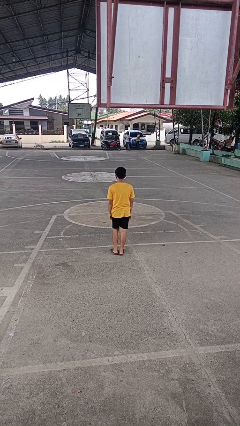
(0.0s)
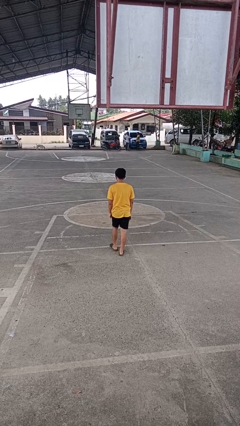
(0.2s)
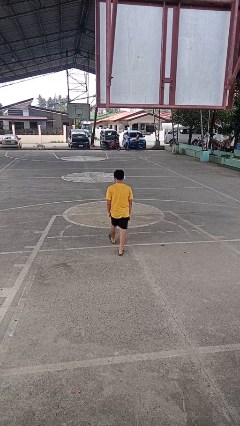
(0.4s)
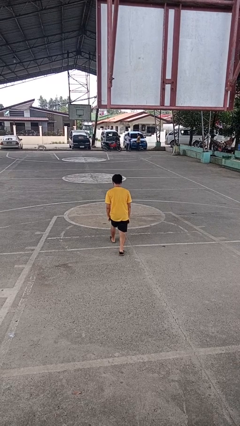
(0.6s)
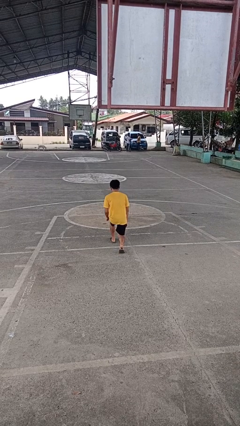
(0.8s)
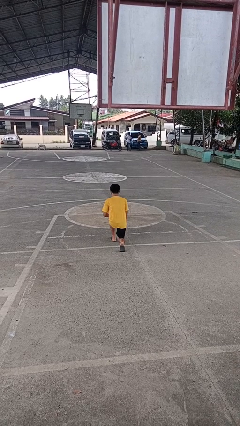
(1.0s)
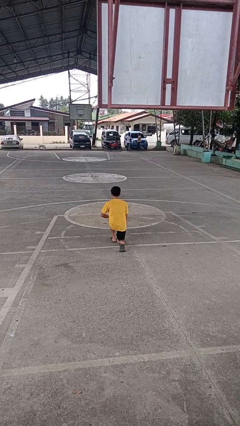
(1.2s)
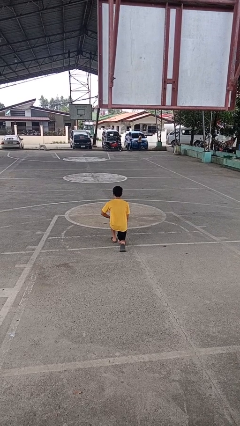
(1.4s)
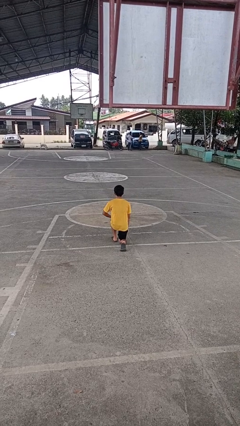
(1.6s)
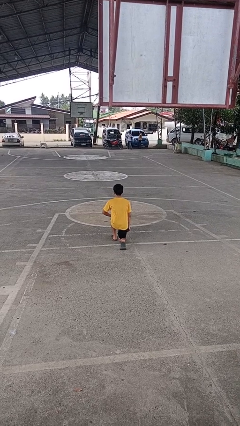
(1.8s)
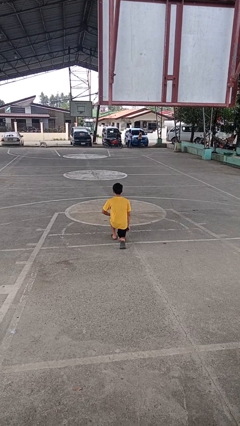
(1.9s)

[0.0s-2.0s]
person kneels

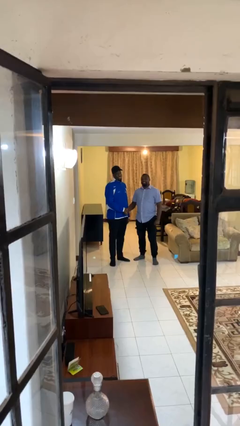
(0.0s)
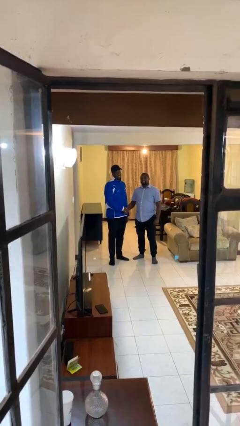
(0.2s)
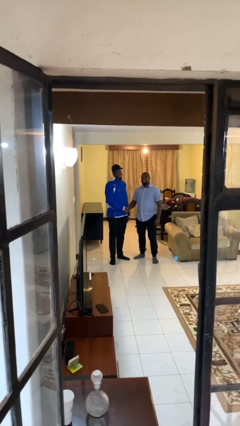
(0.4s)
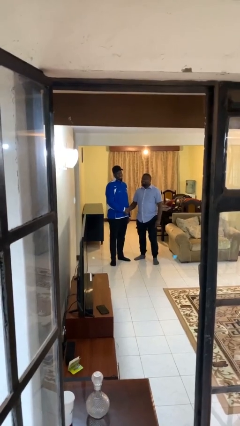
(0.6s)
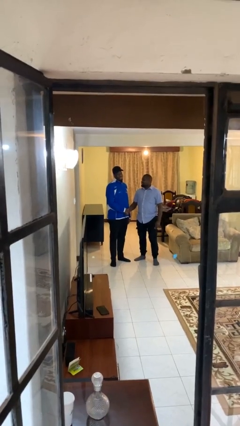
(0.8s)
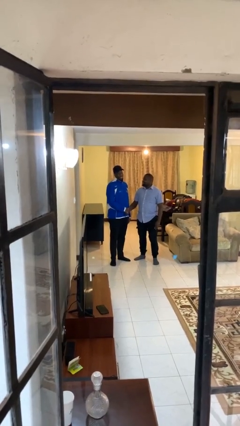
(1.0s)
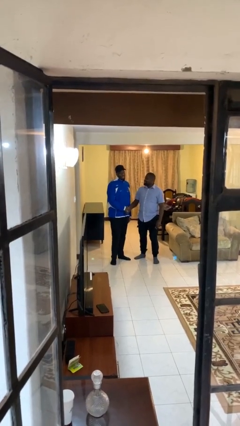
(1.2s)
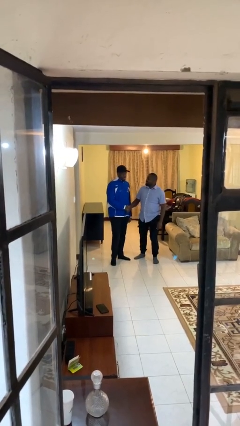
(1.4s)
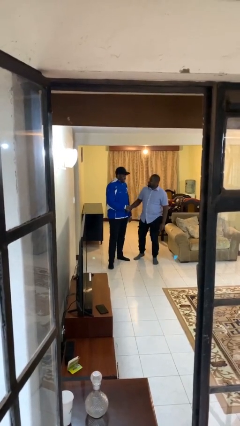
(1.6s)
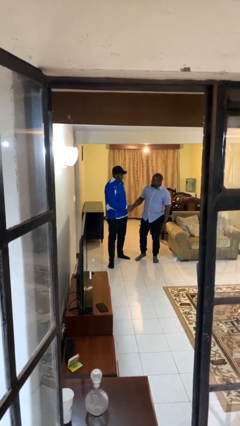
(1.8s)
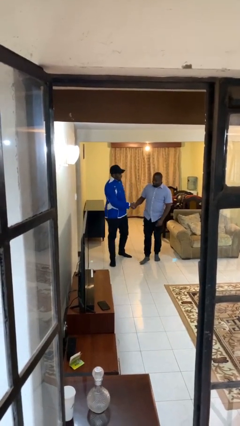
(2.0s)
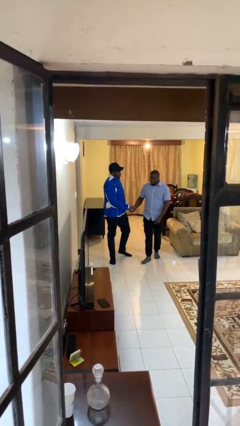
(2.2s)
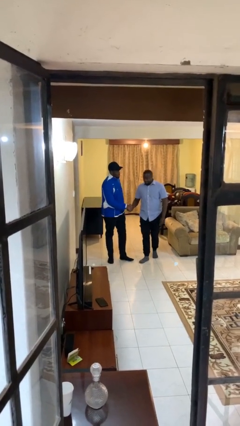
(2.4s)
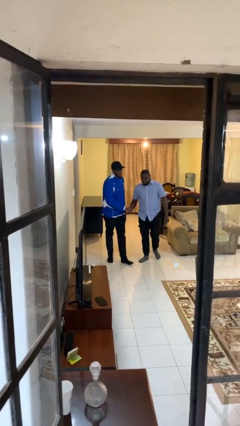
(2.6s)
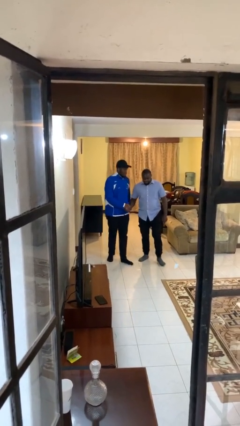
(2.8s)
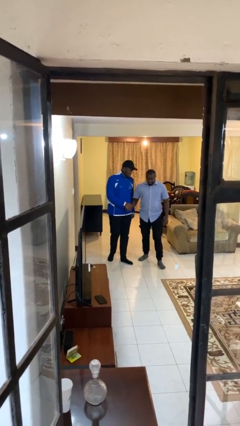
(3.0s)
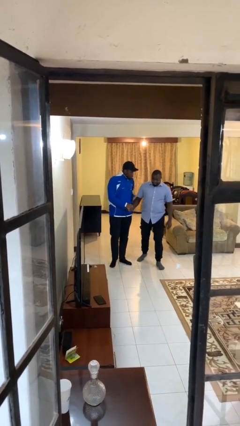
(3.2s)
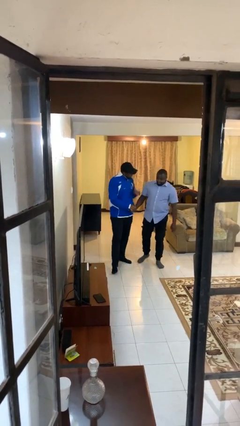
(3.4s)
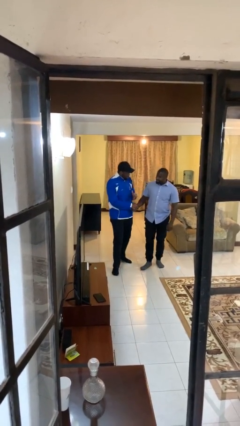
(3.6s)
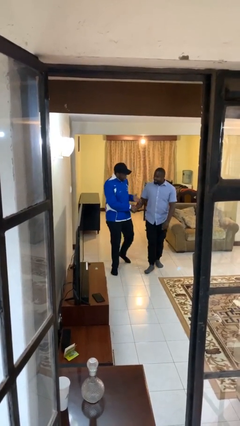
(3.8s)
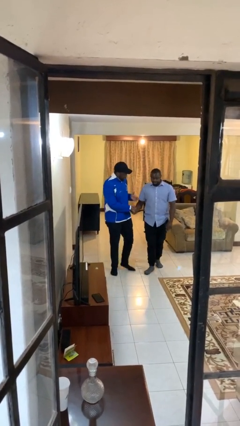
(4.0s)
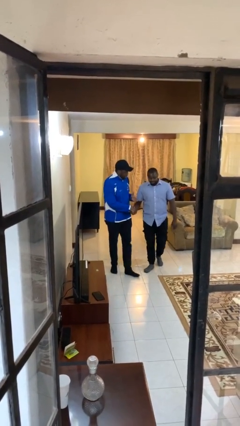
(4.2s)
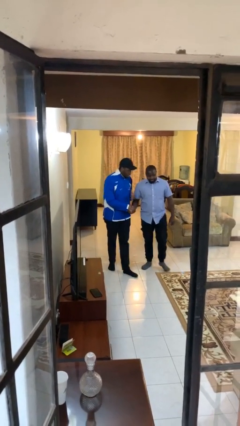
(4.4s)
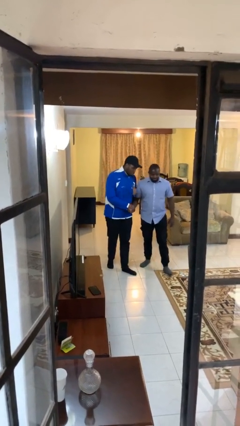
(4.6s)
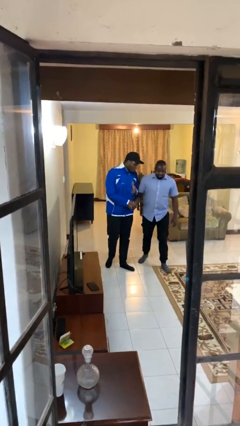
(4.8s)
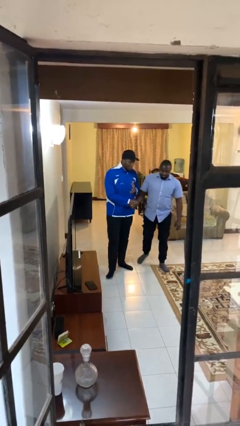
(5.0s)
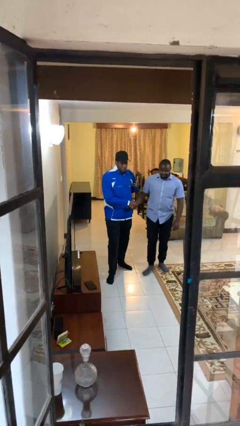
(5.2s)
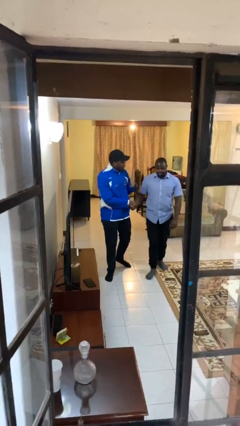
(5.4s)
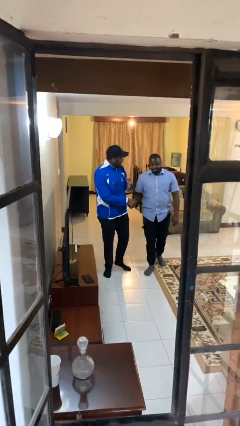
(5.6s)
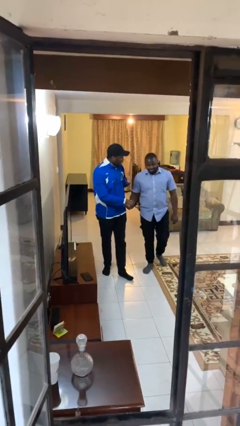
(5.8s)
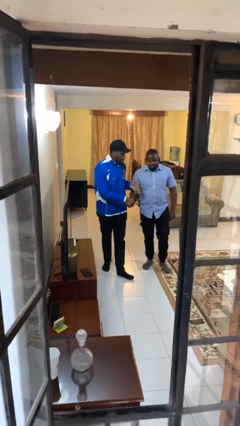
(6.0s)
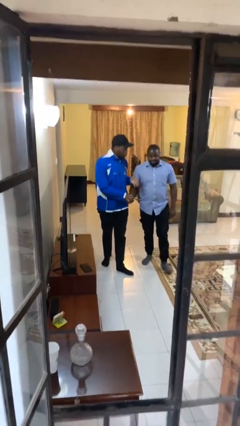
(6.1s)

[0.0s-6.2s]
person holds hand

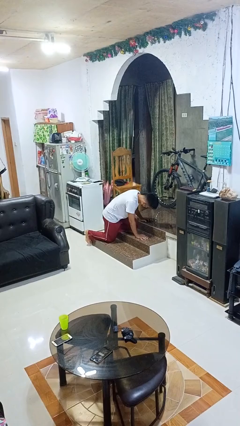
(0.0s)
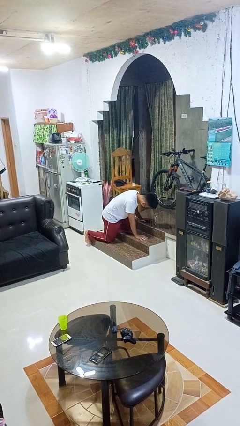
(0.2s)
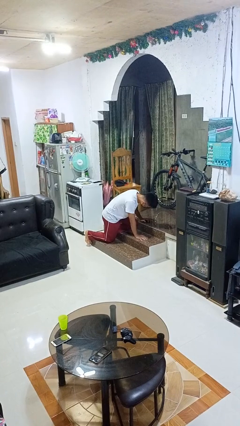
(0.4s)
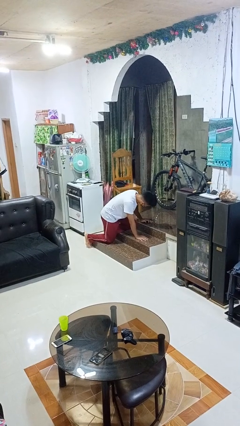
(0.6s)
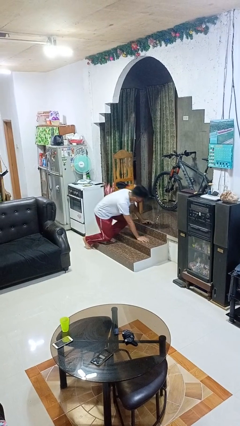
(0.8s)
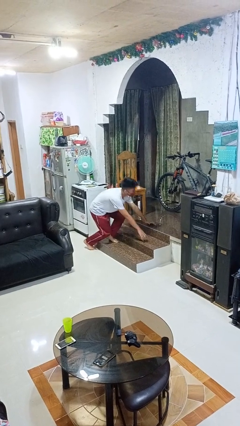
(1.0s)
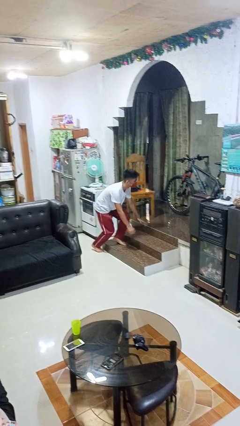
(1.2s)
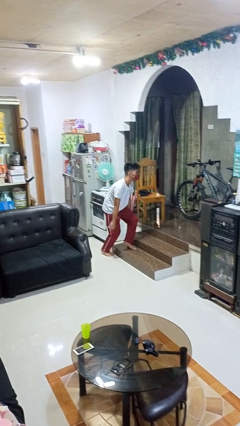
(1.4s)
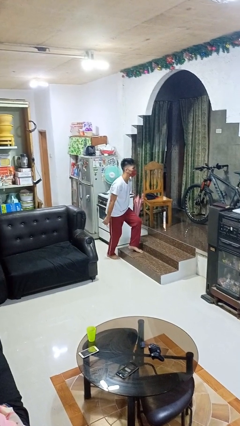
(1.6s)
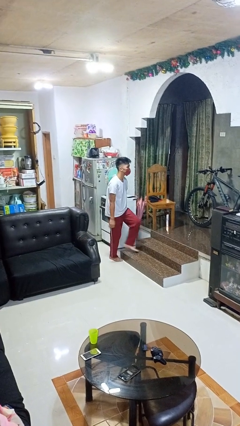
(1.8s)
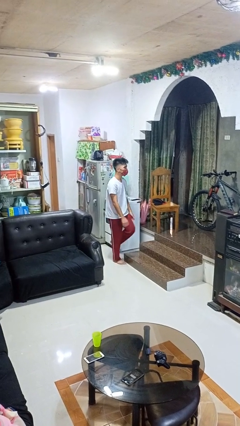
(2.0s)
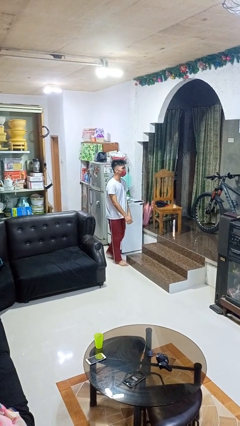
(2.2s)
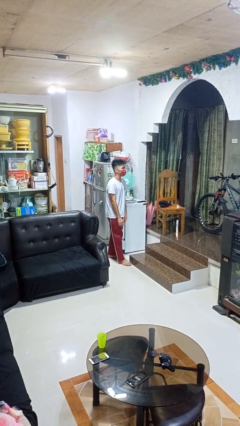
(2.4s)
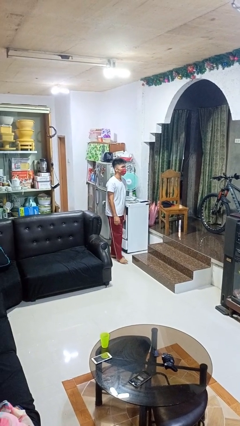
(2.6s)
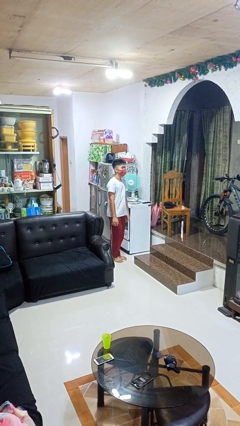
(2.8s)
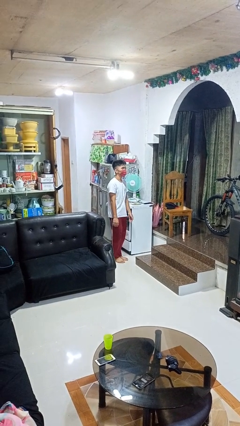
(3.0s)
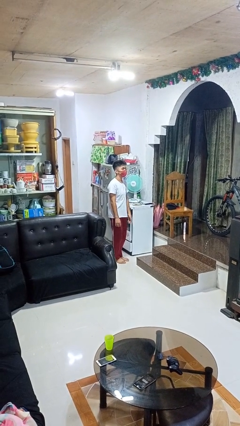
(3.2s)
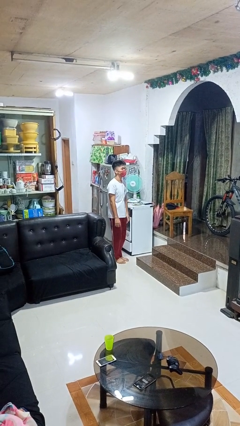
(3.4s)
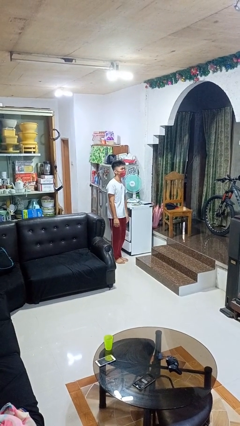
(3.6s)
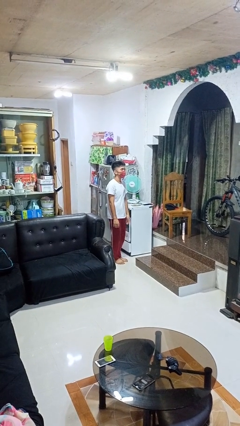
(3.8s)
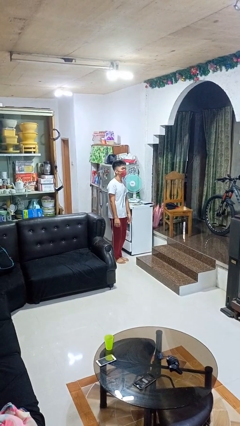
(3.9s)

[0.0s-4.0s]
person stands up from floor

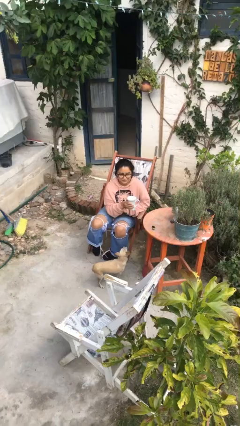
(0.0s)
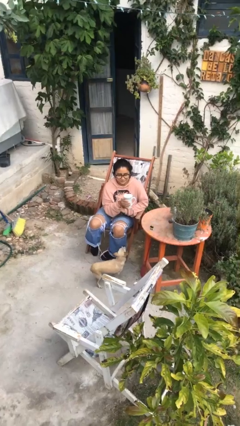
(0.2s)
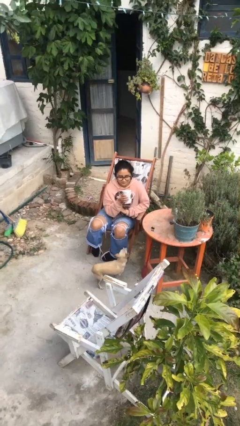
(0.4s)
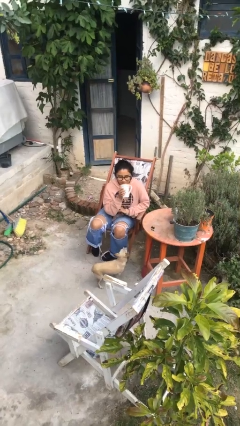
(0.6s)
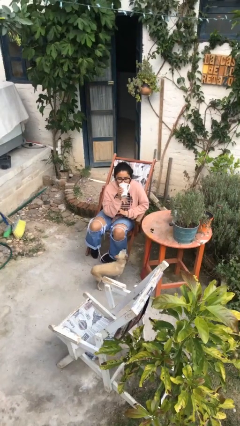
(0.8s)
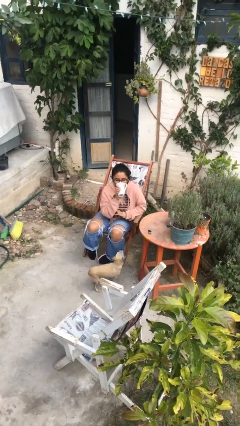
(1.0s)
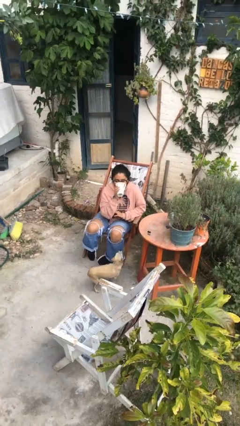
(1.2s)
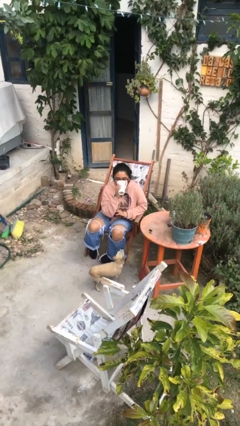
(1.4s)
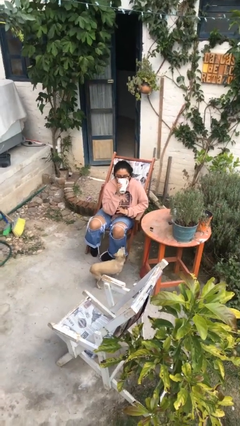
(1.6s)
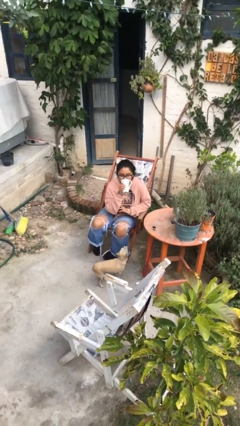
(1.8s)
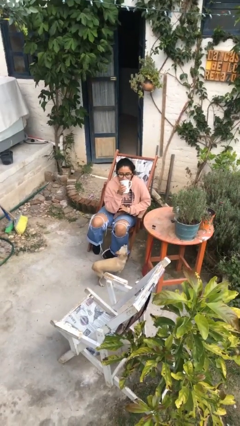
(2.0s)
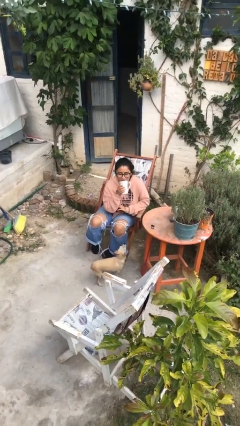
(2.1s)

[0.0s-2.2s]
person drinks from mug

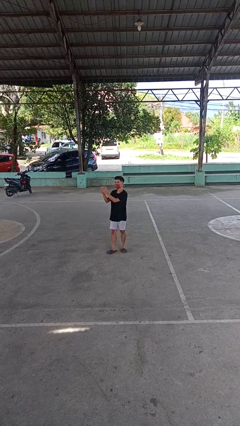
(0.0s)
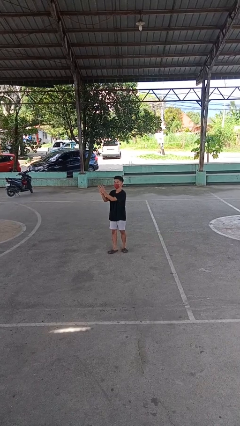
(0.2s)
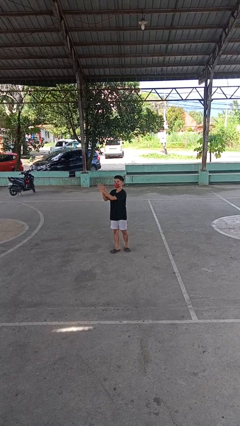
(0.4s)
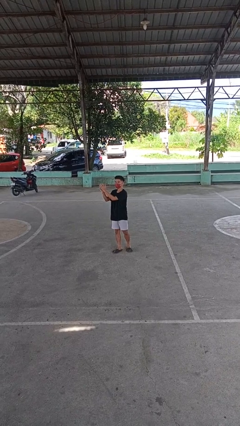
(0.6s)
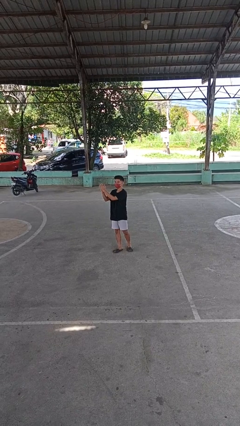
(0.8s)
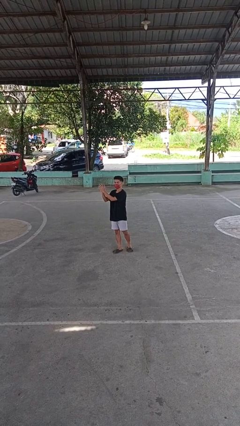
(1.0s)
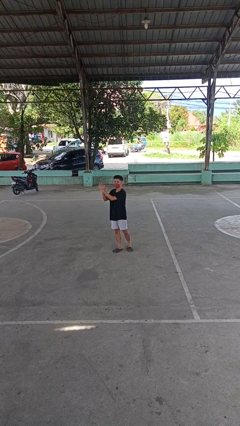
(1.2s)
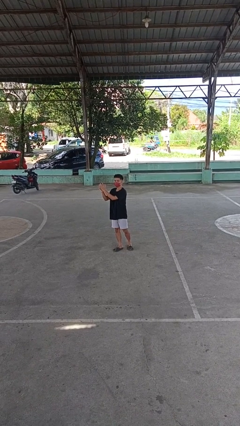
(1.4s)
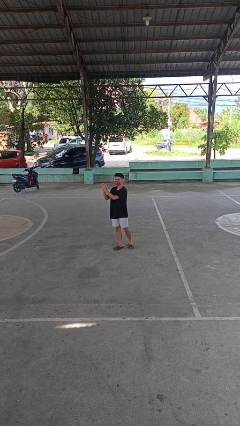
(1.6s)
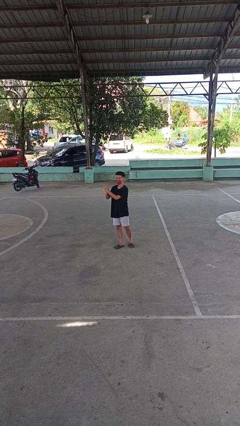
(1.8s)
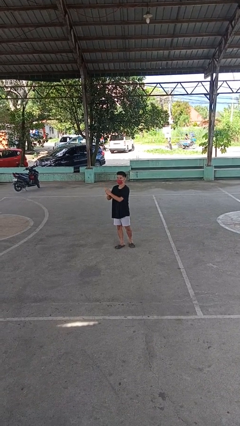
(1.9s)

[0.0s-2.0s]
person claps hands

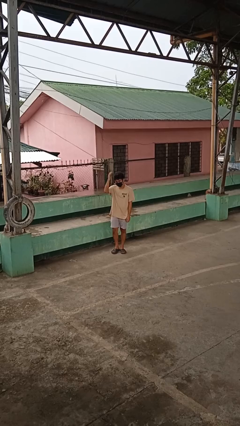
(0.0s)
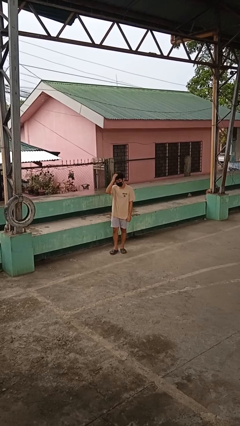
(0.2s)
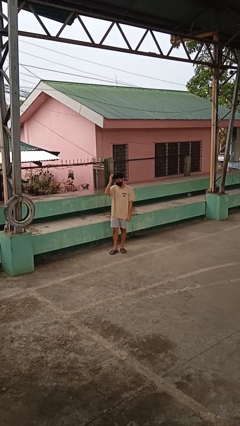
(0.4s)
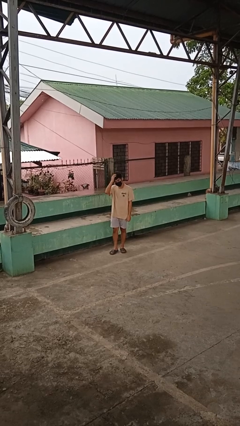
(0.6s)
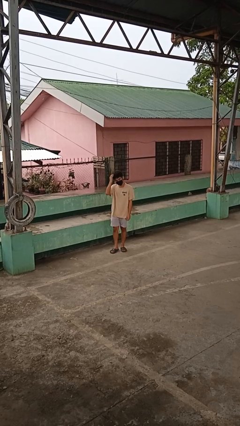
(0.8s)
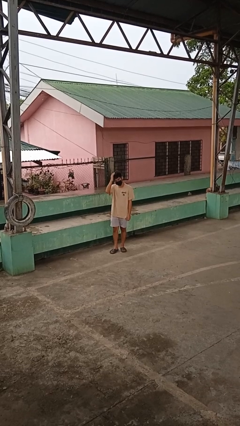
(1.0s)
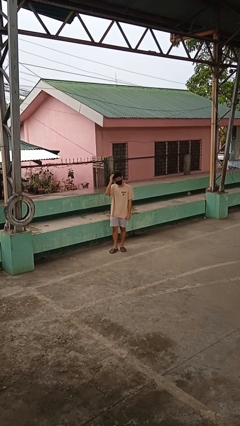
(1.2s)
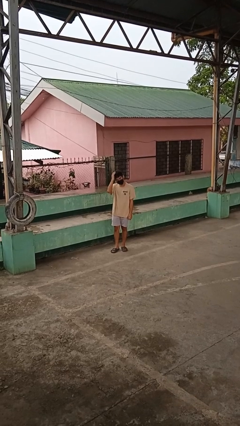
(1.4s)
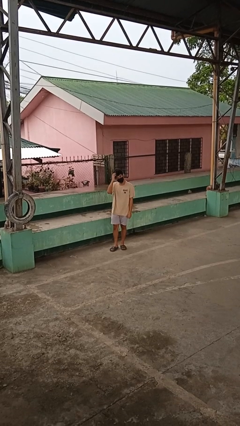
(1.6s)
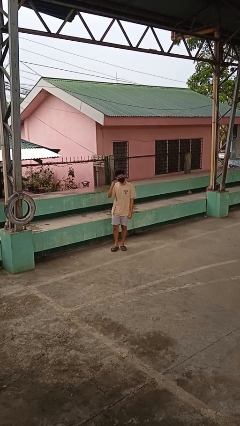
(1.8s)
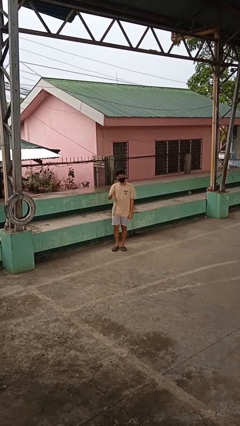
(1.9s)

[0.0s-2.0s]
person pats head
